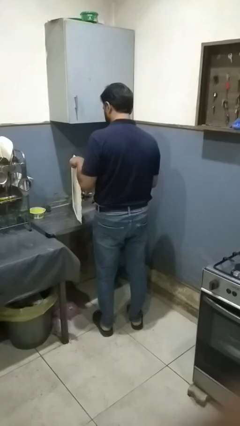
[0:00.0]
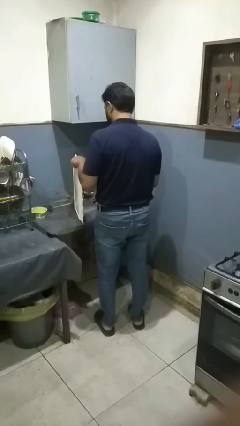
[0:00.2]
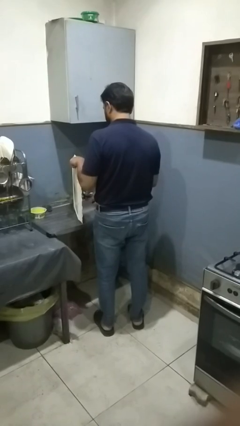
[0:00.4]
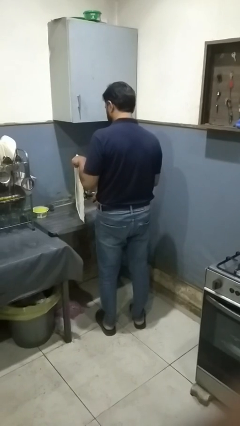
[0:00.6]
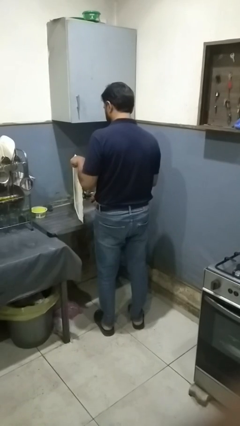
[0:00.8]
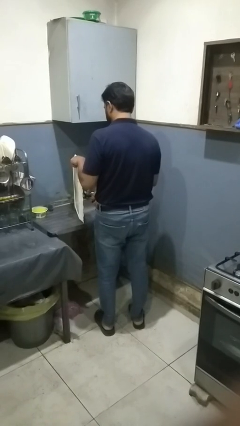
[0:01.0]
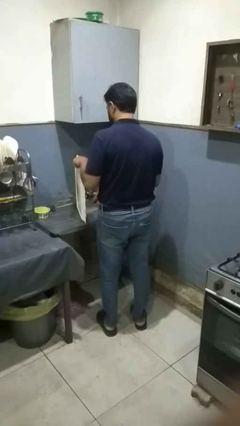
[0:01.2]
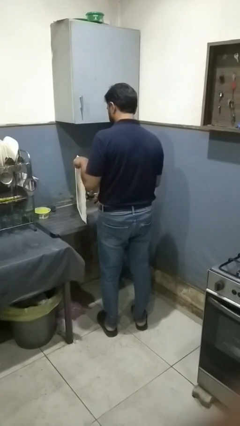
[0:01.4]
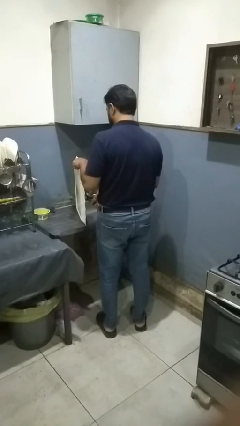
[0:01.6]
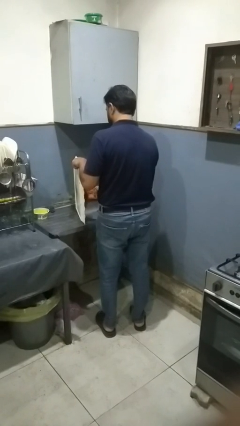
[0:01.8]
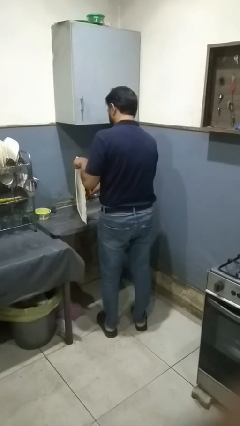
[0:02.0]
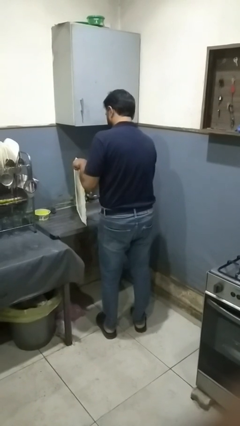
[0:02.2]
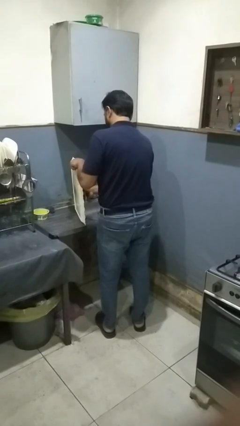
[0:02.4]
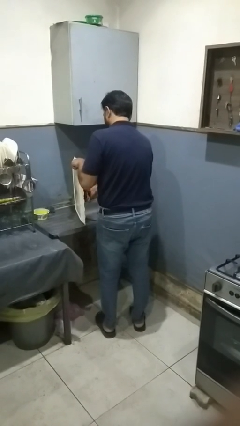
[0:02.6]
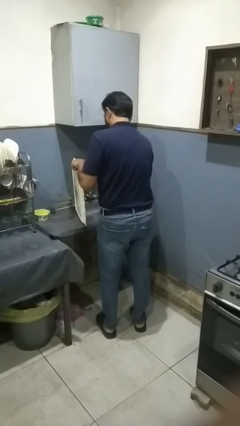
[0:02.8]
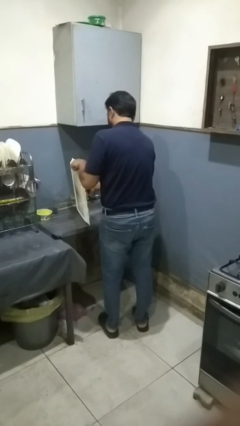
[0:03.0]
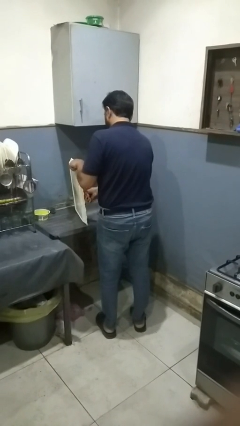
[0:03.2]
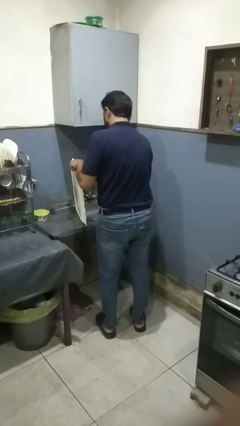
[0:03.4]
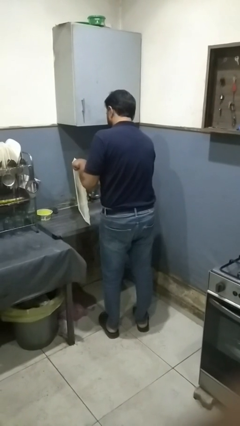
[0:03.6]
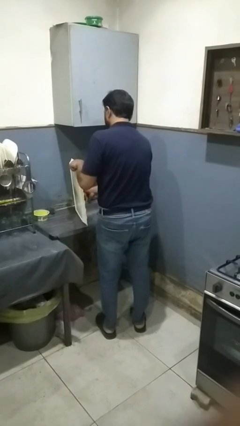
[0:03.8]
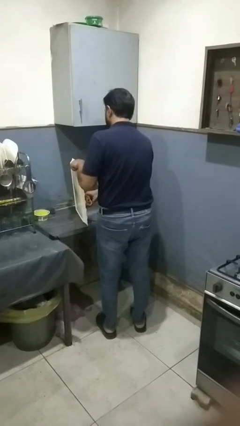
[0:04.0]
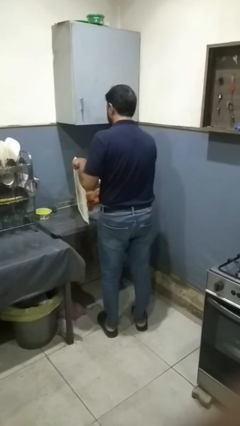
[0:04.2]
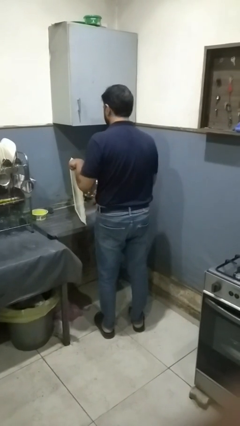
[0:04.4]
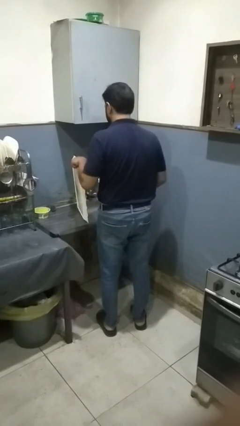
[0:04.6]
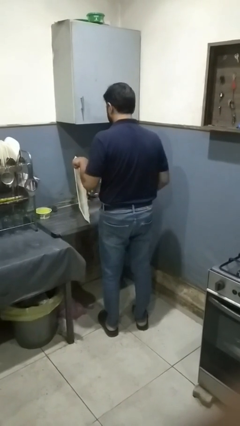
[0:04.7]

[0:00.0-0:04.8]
person dries dish

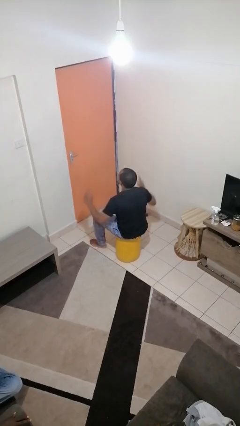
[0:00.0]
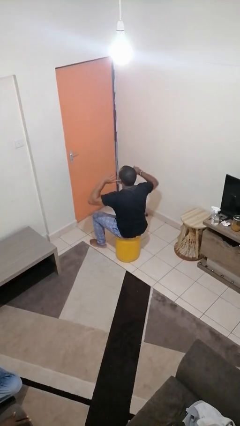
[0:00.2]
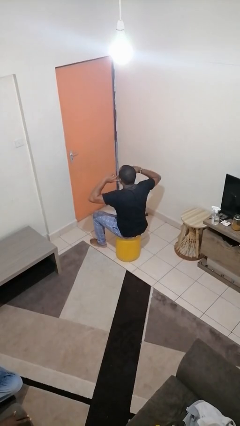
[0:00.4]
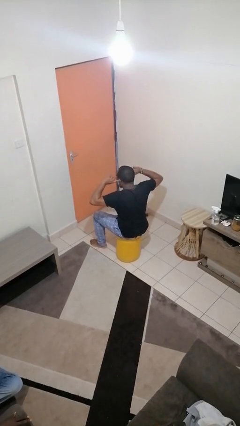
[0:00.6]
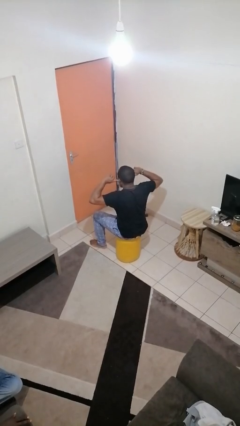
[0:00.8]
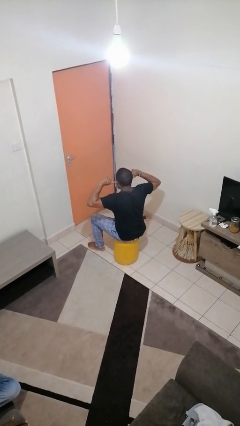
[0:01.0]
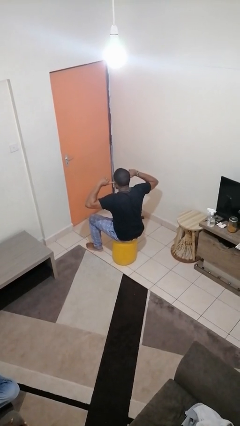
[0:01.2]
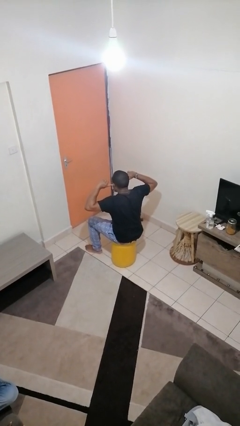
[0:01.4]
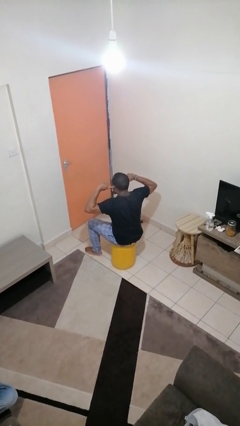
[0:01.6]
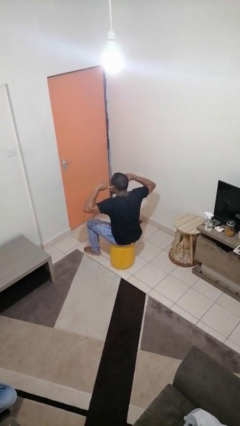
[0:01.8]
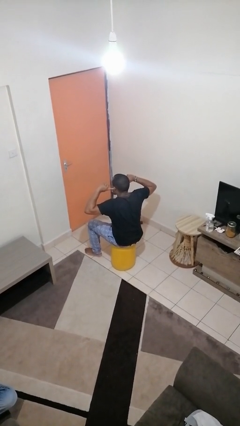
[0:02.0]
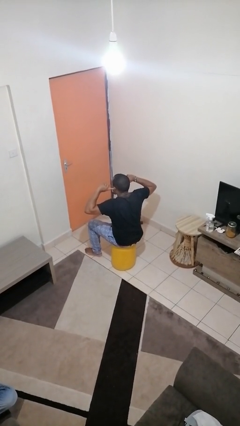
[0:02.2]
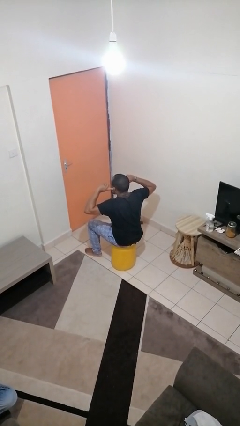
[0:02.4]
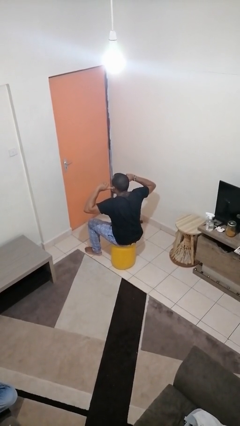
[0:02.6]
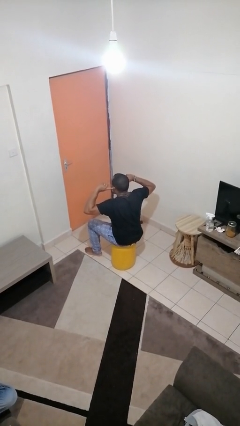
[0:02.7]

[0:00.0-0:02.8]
person puts fingers in ear

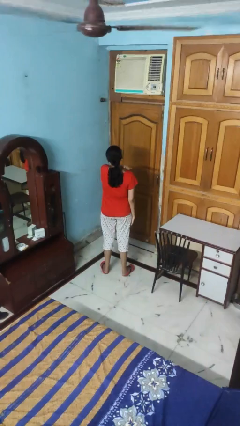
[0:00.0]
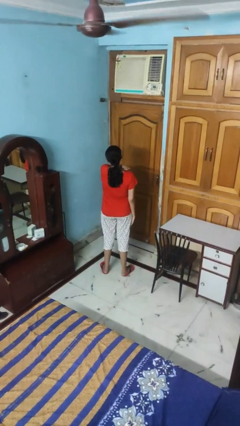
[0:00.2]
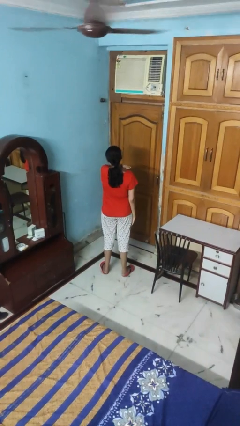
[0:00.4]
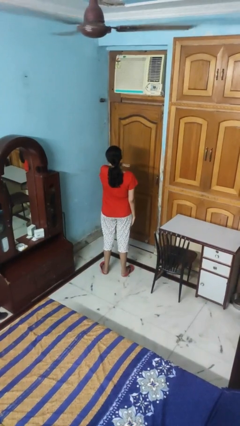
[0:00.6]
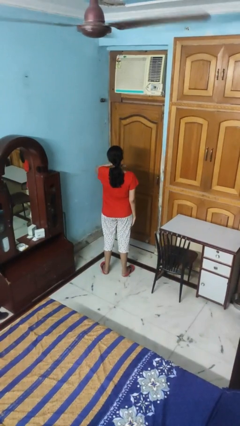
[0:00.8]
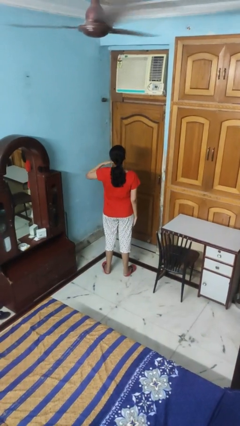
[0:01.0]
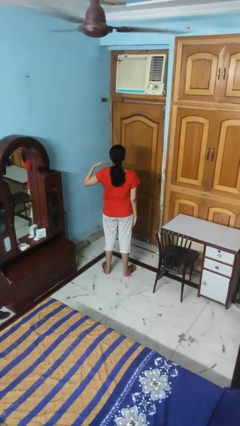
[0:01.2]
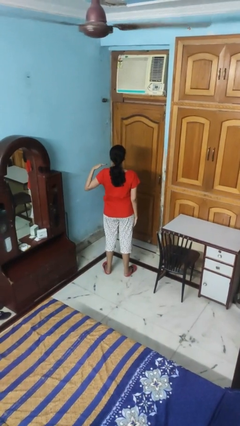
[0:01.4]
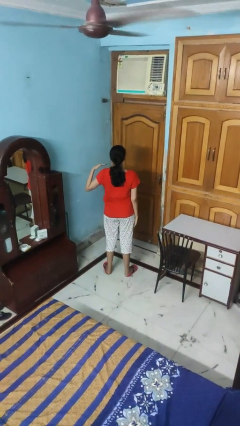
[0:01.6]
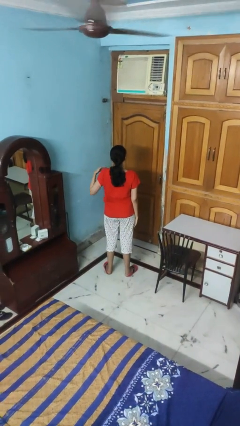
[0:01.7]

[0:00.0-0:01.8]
person gestures cut

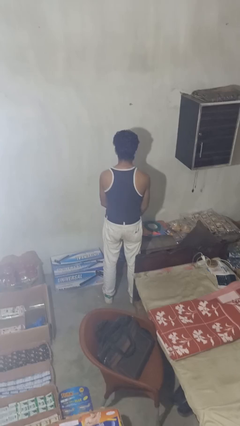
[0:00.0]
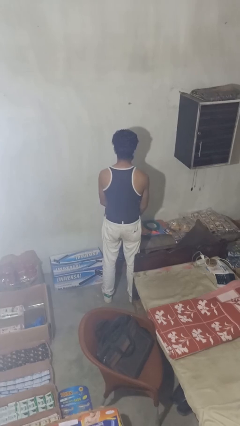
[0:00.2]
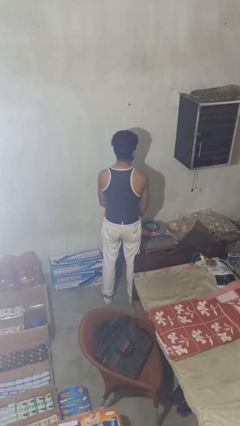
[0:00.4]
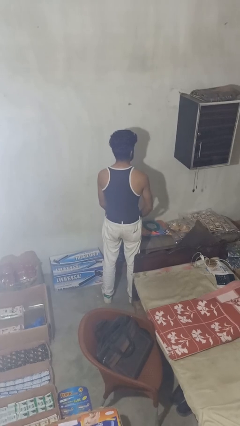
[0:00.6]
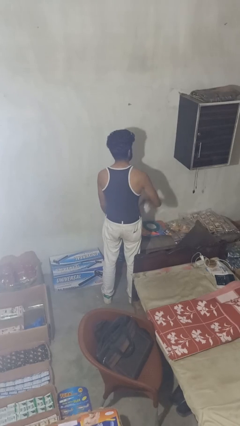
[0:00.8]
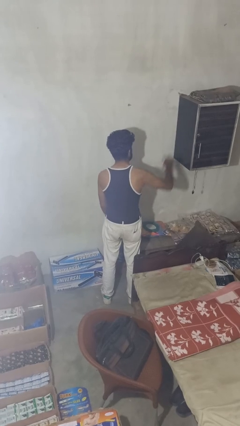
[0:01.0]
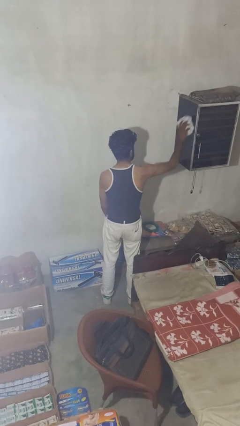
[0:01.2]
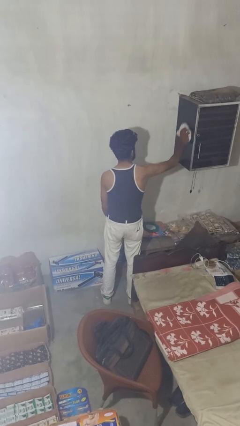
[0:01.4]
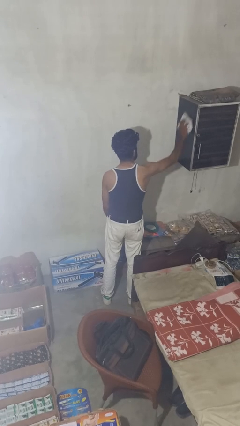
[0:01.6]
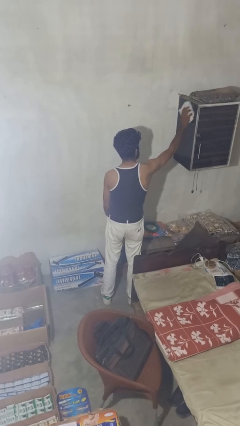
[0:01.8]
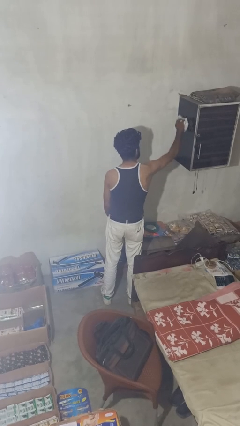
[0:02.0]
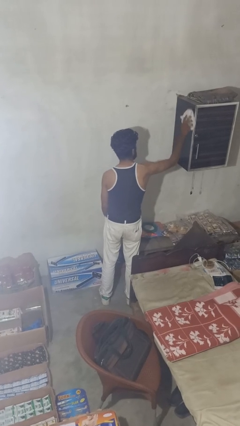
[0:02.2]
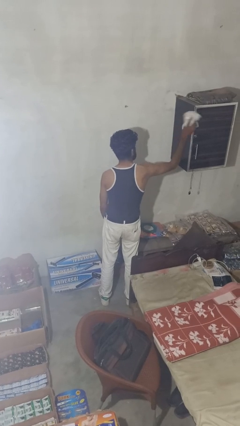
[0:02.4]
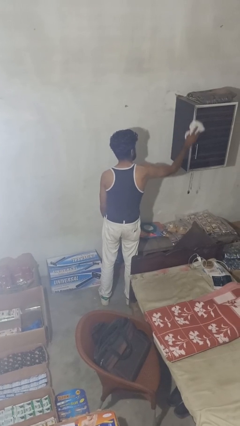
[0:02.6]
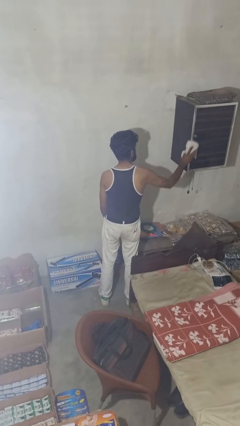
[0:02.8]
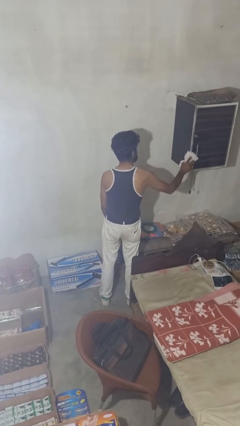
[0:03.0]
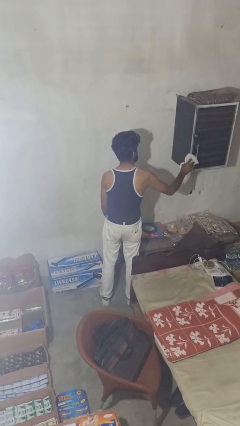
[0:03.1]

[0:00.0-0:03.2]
person dusts furniture

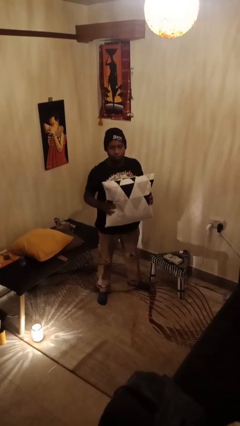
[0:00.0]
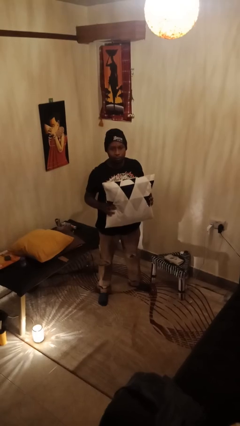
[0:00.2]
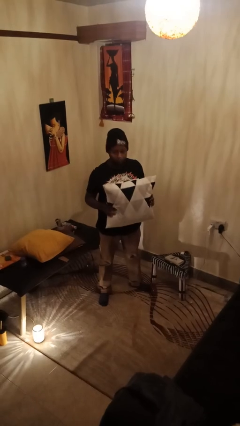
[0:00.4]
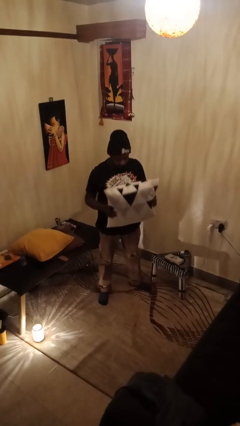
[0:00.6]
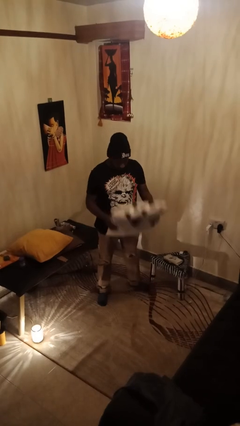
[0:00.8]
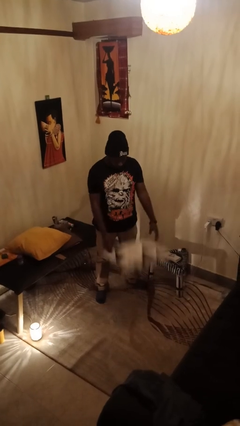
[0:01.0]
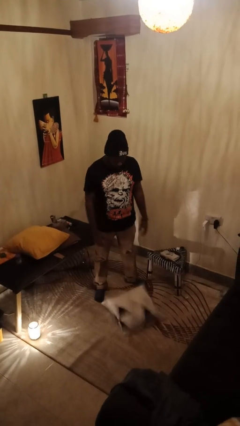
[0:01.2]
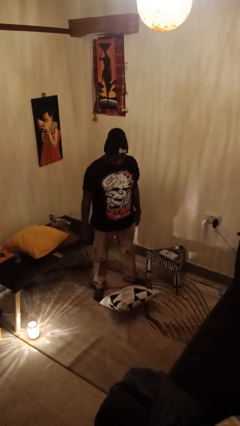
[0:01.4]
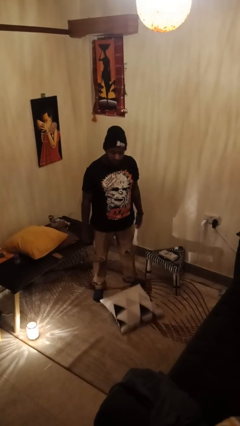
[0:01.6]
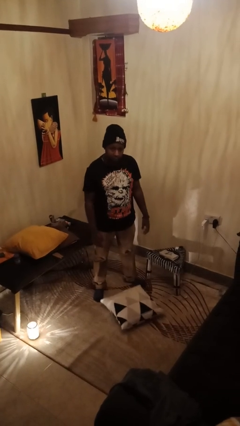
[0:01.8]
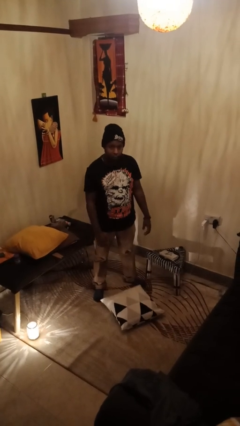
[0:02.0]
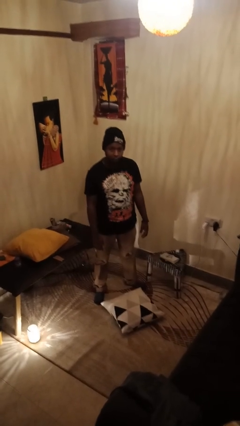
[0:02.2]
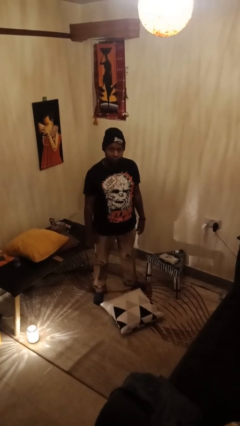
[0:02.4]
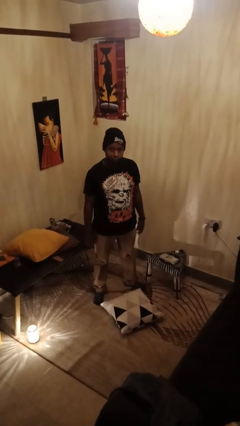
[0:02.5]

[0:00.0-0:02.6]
person drops object

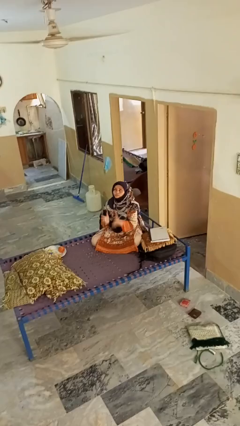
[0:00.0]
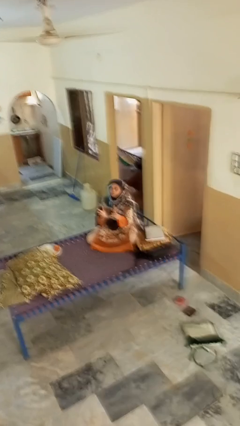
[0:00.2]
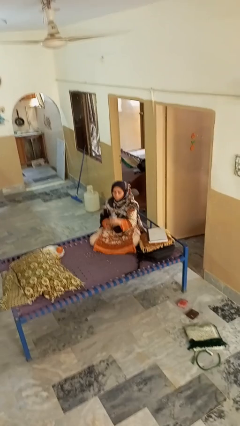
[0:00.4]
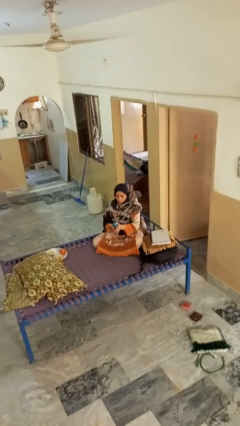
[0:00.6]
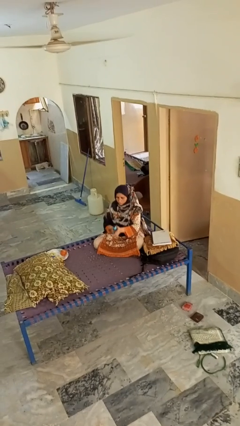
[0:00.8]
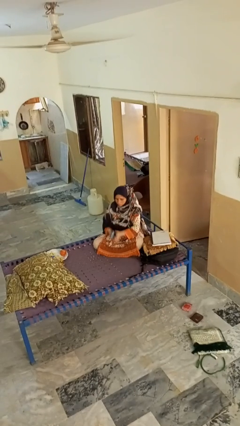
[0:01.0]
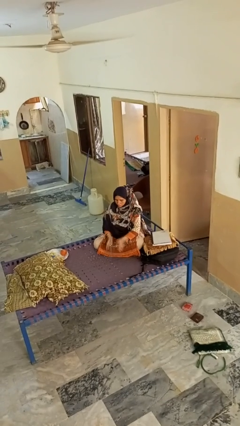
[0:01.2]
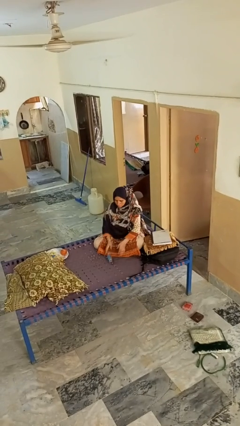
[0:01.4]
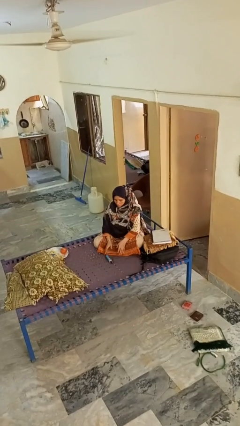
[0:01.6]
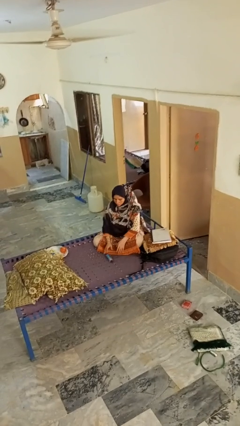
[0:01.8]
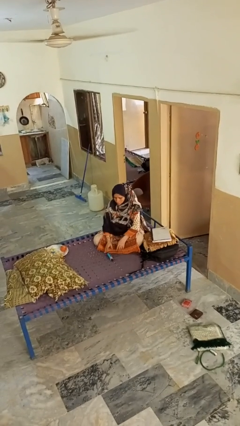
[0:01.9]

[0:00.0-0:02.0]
person catches dropped object

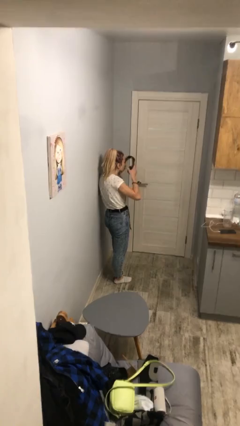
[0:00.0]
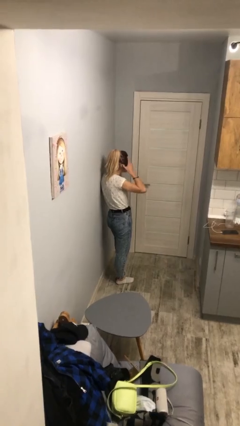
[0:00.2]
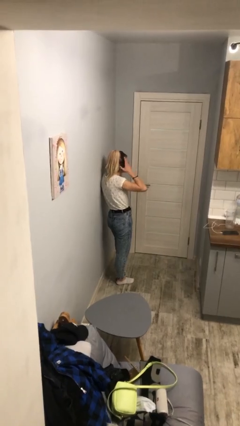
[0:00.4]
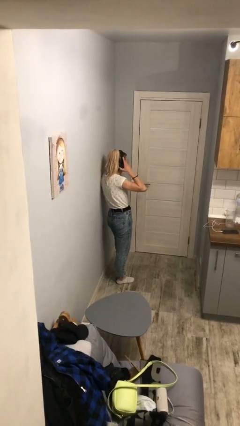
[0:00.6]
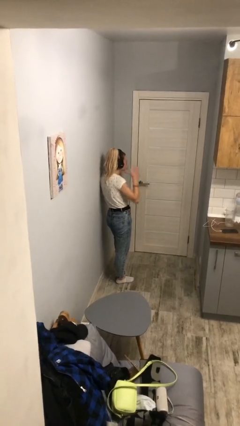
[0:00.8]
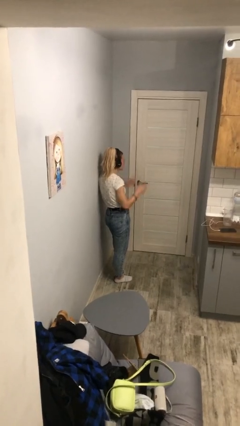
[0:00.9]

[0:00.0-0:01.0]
person puts on headphones
